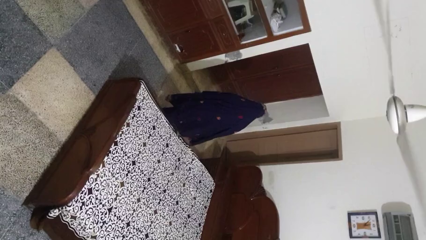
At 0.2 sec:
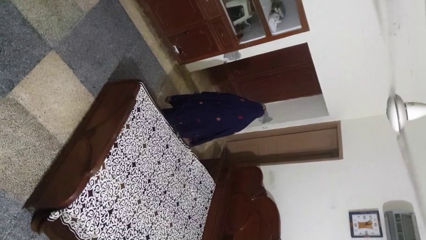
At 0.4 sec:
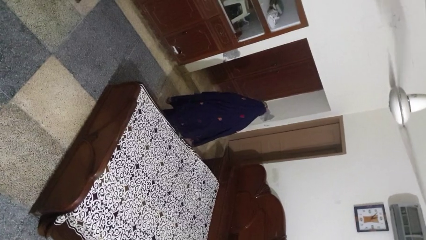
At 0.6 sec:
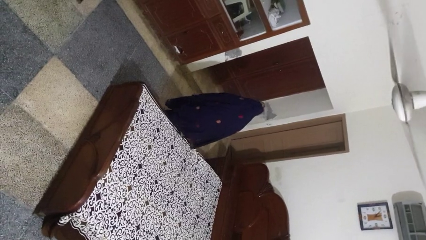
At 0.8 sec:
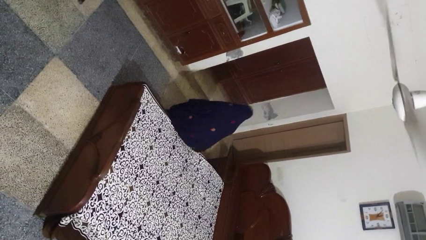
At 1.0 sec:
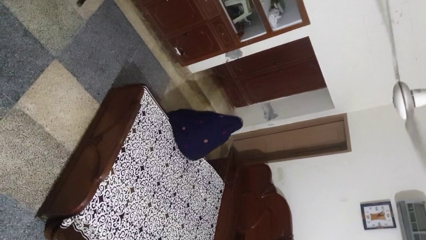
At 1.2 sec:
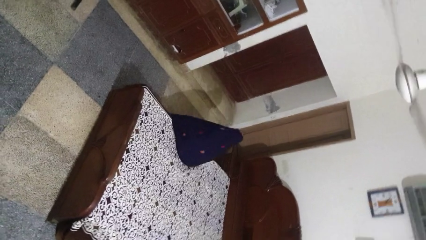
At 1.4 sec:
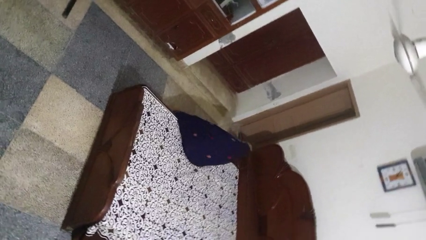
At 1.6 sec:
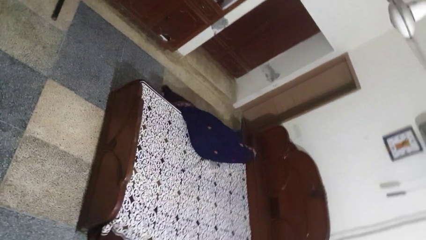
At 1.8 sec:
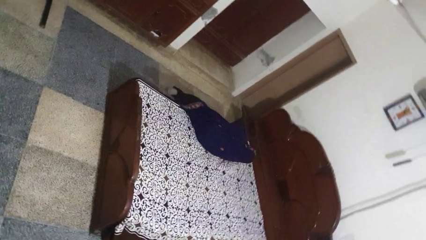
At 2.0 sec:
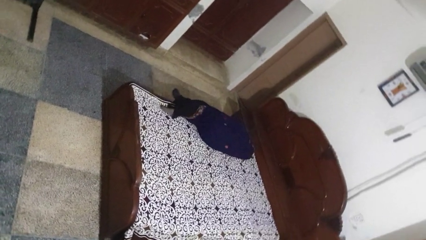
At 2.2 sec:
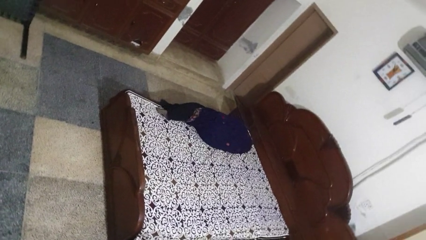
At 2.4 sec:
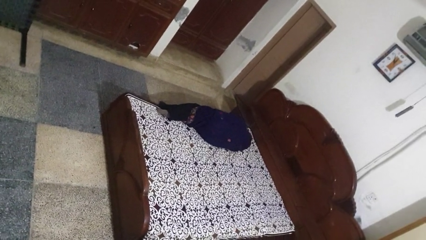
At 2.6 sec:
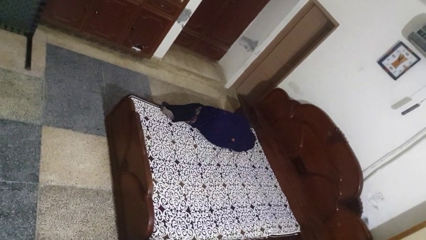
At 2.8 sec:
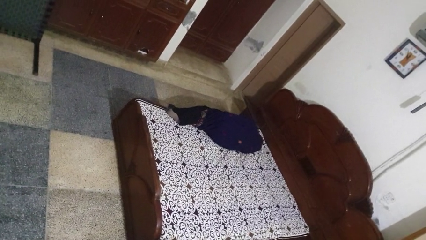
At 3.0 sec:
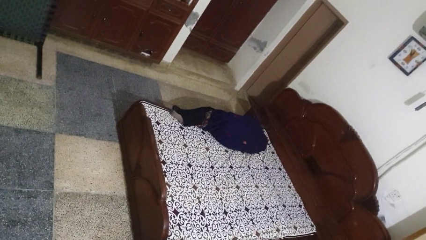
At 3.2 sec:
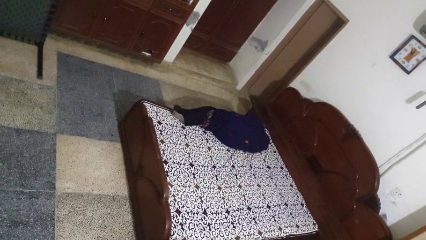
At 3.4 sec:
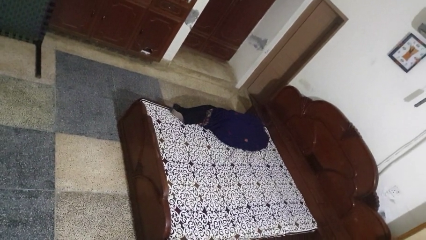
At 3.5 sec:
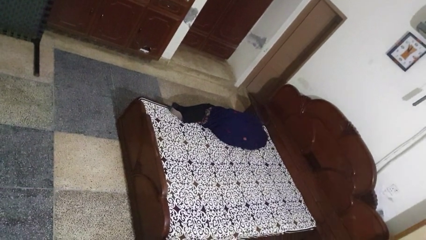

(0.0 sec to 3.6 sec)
person lies down on bed

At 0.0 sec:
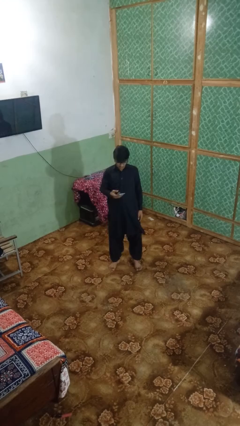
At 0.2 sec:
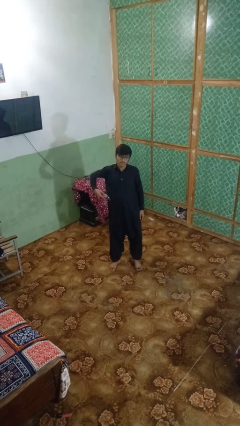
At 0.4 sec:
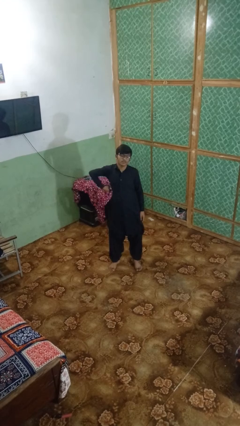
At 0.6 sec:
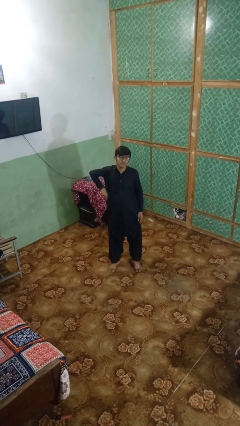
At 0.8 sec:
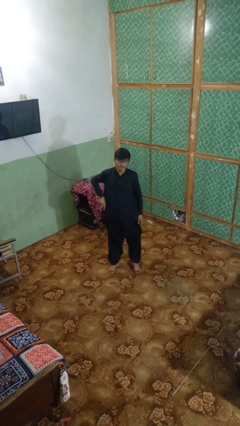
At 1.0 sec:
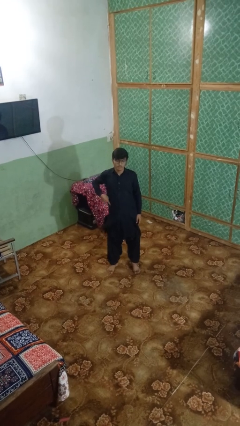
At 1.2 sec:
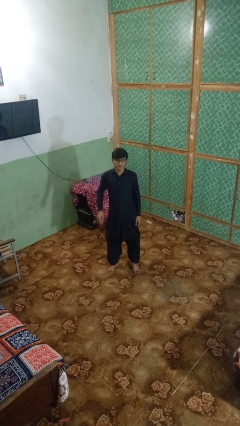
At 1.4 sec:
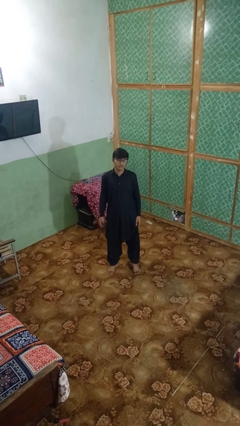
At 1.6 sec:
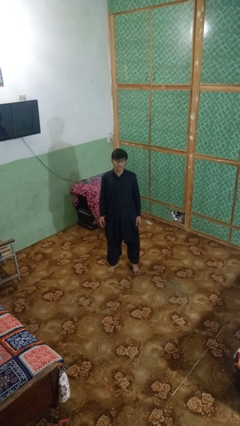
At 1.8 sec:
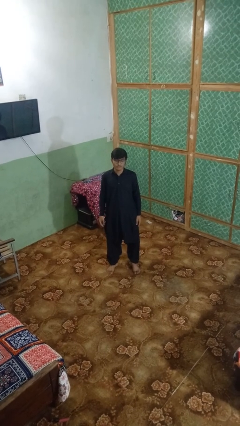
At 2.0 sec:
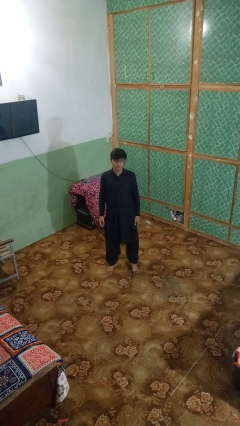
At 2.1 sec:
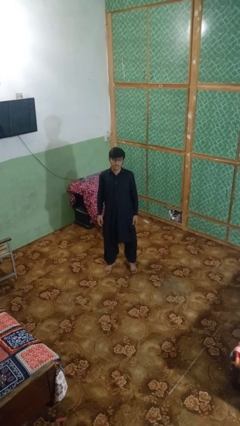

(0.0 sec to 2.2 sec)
person puts phone into pocket

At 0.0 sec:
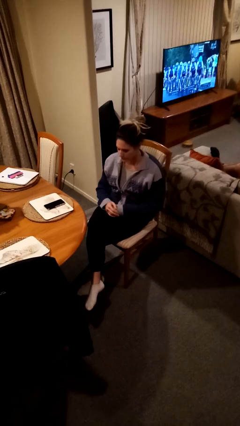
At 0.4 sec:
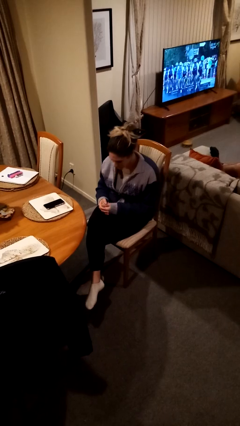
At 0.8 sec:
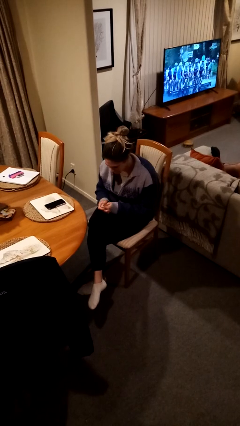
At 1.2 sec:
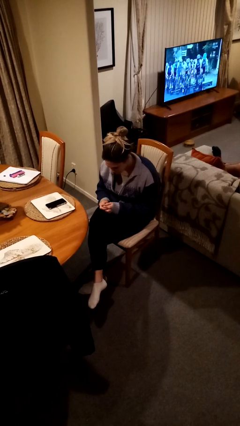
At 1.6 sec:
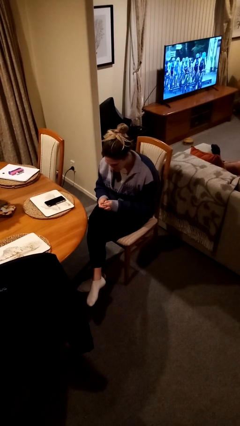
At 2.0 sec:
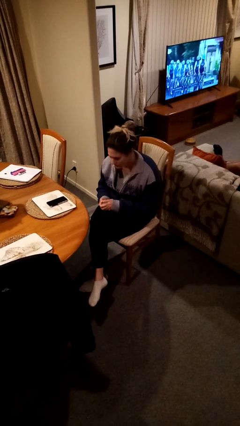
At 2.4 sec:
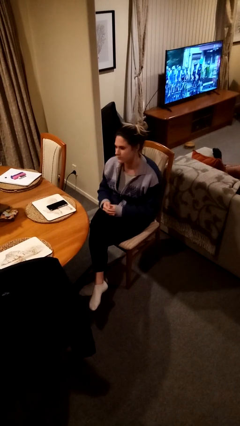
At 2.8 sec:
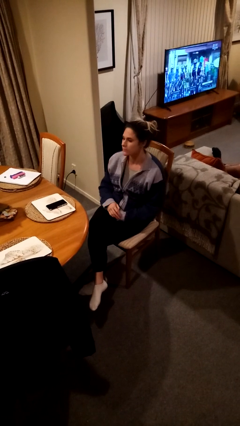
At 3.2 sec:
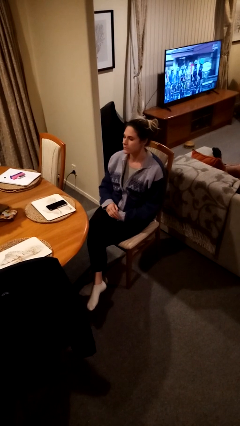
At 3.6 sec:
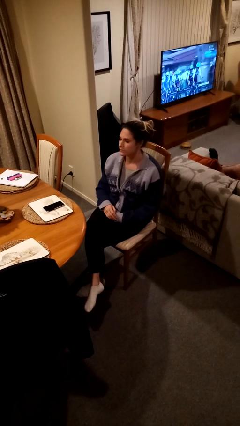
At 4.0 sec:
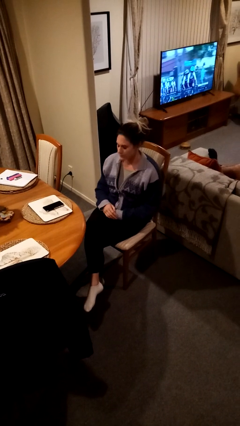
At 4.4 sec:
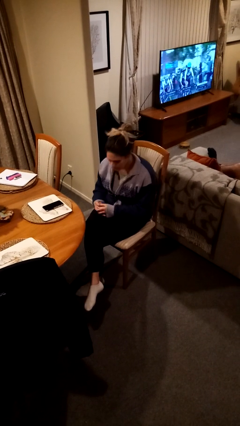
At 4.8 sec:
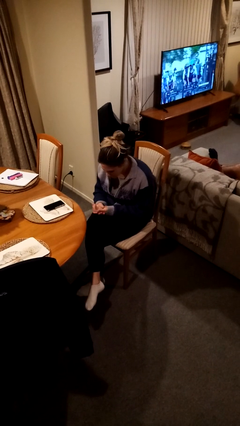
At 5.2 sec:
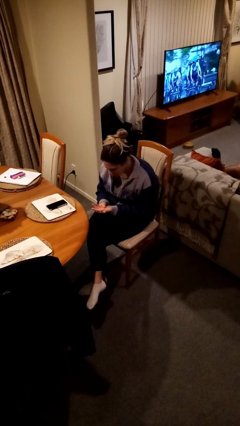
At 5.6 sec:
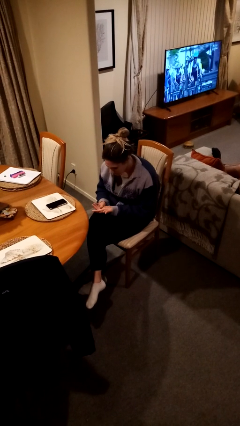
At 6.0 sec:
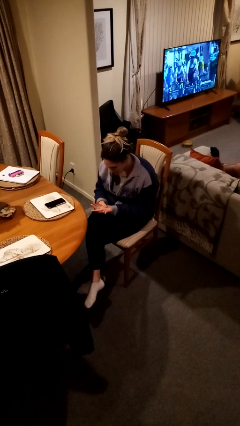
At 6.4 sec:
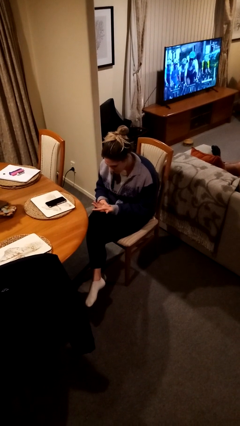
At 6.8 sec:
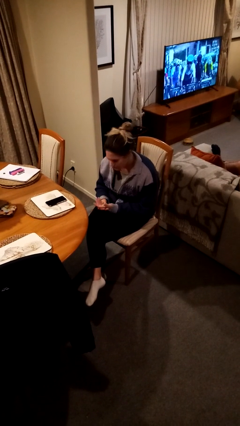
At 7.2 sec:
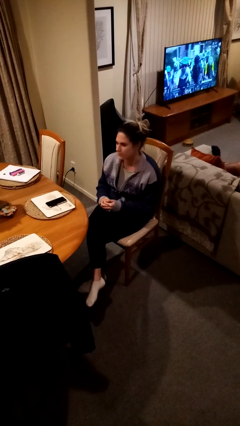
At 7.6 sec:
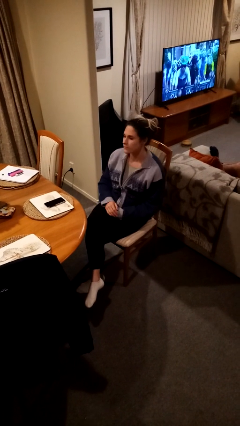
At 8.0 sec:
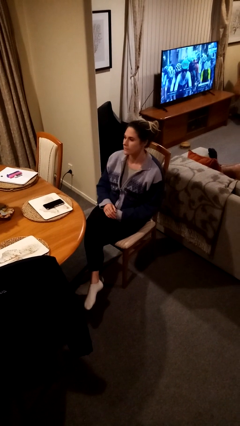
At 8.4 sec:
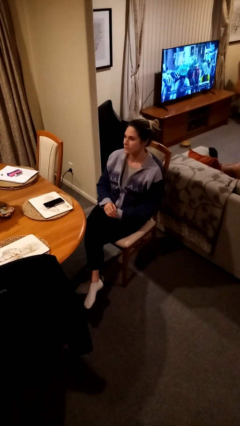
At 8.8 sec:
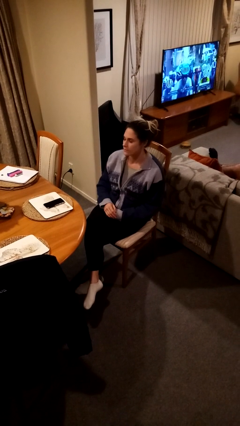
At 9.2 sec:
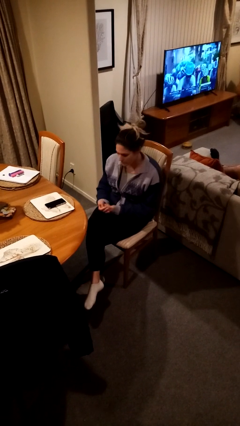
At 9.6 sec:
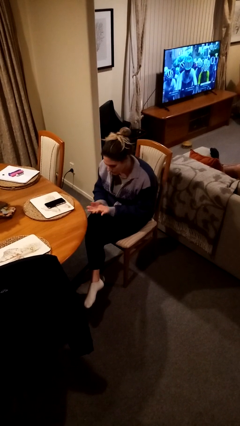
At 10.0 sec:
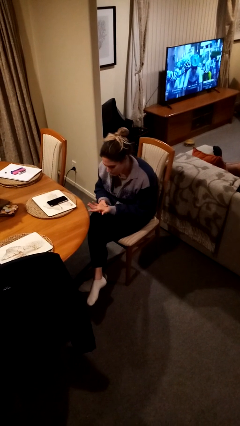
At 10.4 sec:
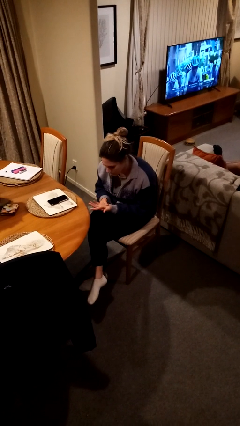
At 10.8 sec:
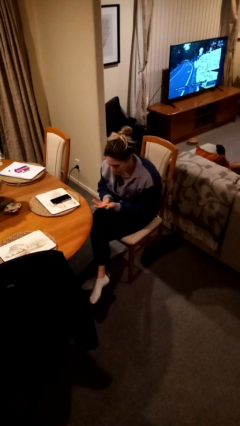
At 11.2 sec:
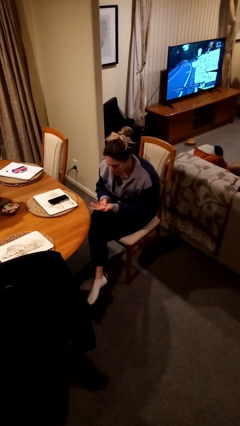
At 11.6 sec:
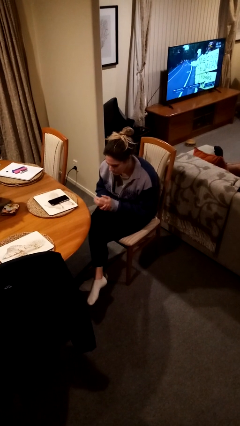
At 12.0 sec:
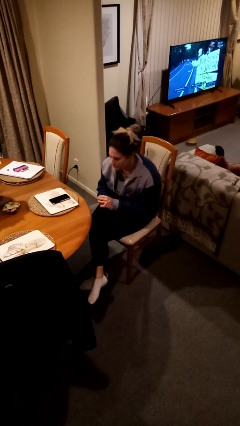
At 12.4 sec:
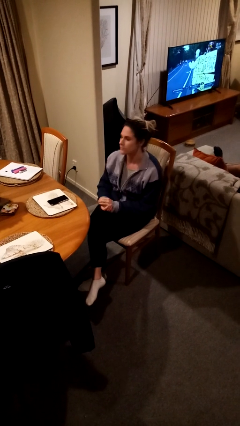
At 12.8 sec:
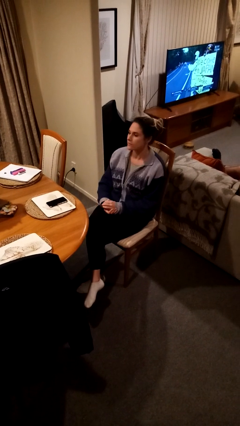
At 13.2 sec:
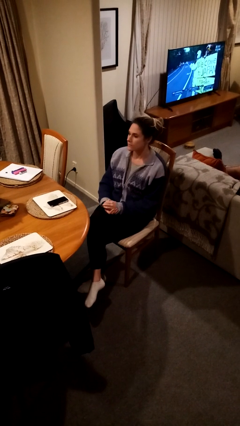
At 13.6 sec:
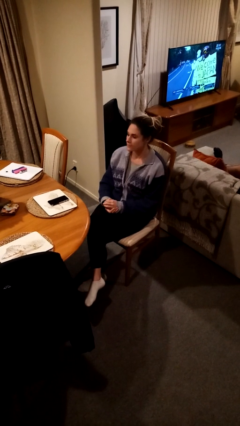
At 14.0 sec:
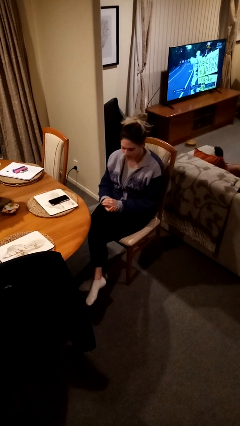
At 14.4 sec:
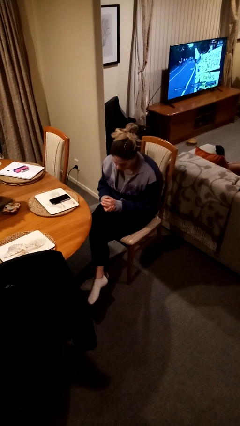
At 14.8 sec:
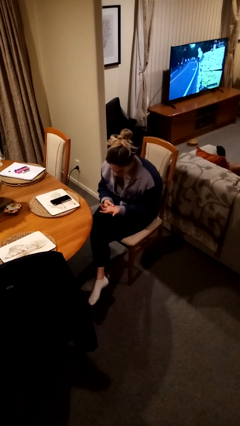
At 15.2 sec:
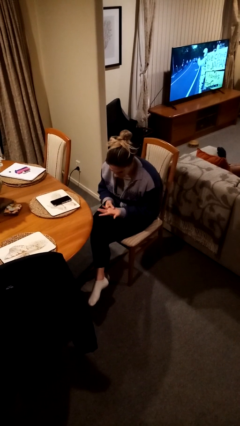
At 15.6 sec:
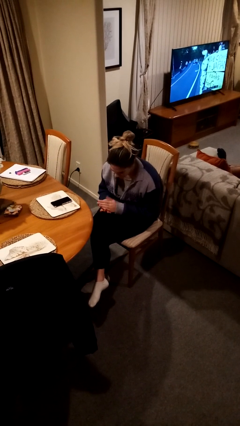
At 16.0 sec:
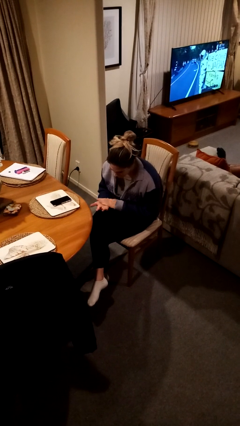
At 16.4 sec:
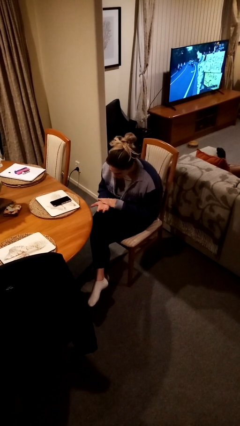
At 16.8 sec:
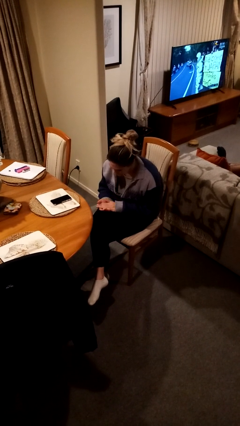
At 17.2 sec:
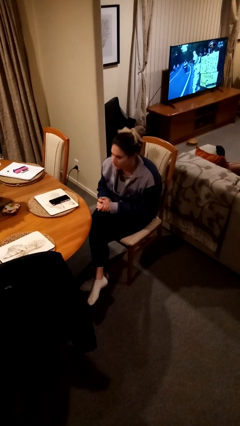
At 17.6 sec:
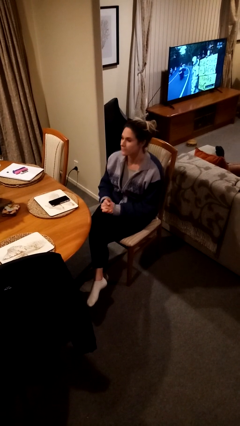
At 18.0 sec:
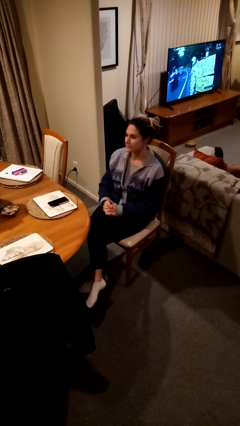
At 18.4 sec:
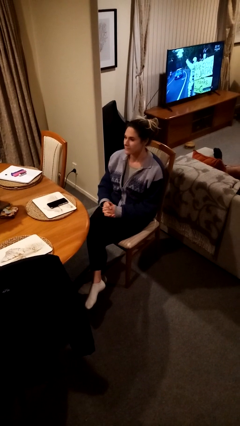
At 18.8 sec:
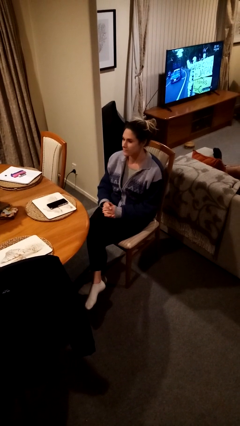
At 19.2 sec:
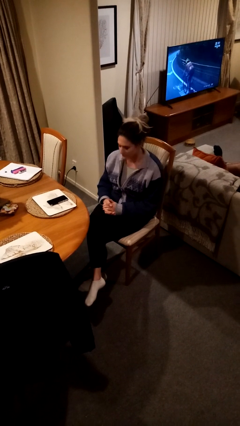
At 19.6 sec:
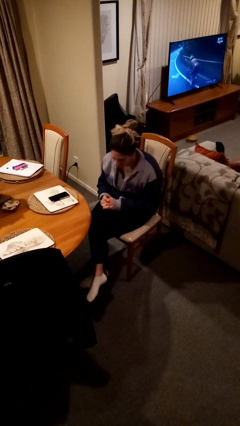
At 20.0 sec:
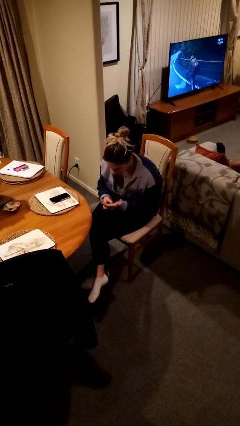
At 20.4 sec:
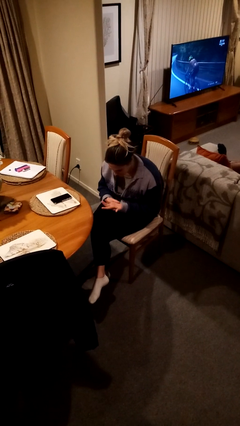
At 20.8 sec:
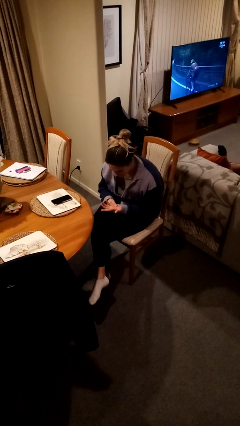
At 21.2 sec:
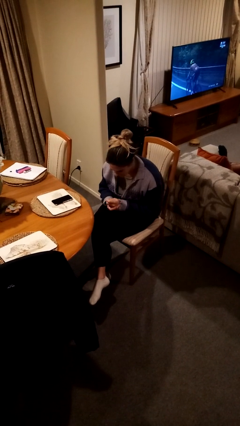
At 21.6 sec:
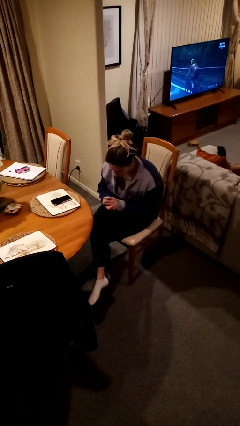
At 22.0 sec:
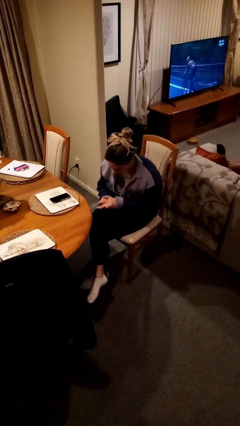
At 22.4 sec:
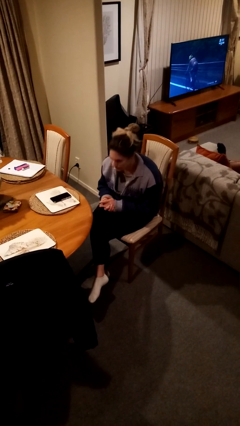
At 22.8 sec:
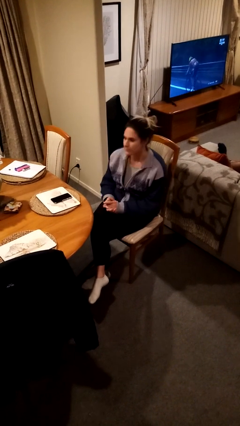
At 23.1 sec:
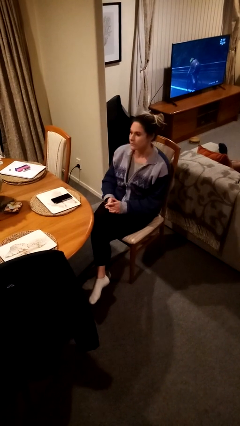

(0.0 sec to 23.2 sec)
person looks at hands in lap
